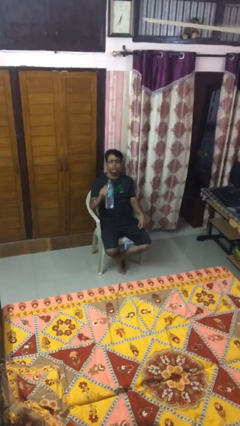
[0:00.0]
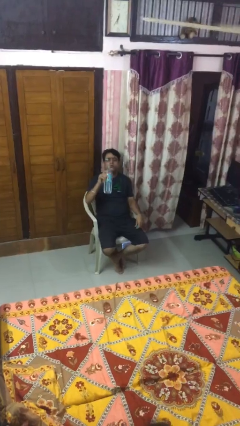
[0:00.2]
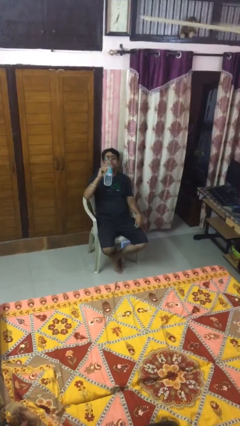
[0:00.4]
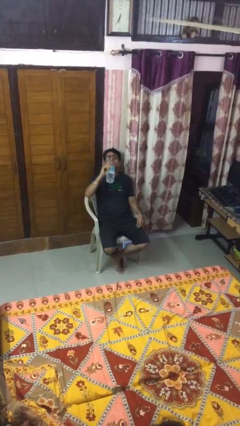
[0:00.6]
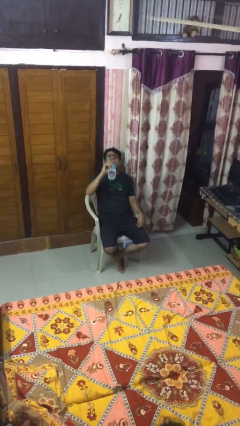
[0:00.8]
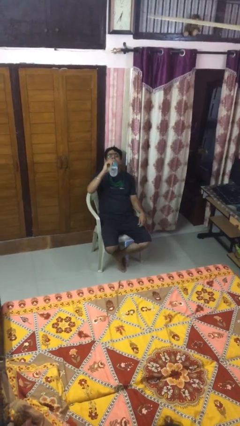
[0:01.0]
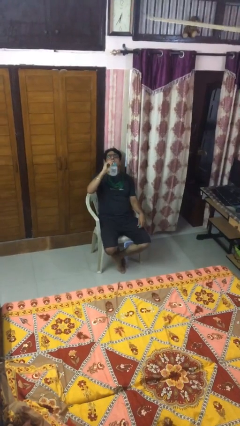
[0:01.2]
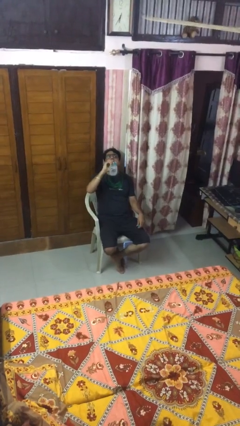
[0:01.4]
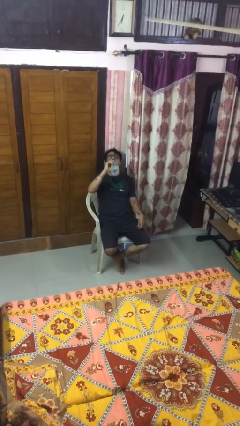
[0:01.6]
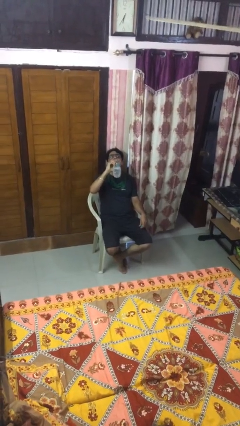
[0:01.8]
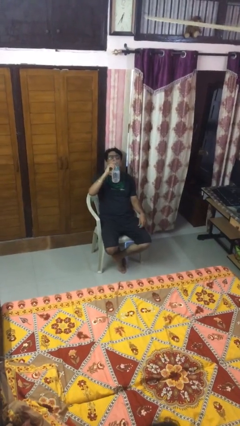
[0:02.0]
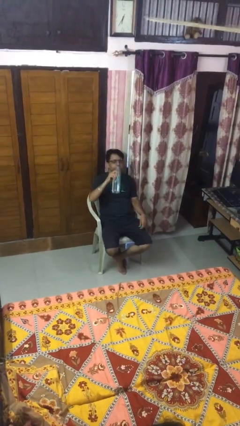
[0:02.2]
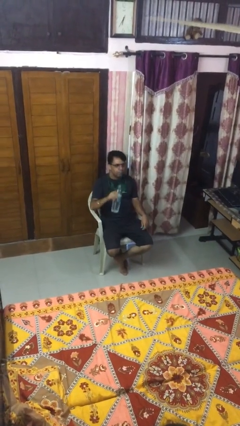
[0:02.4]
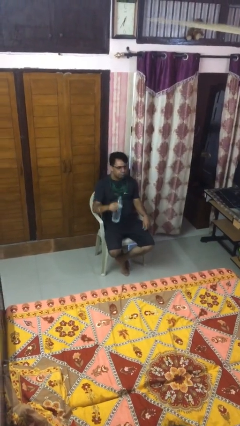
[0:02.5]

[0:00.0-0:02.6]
person drinks from bottle

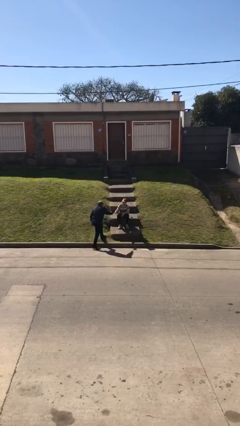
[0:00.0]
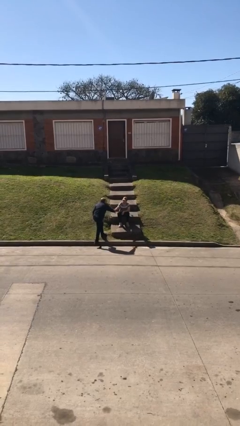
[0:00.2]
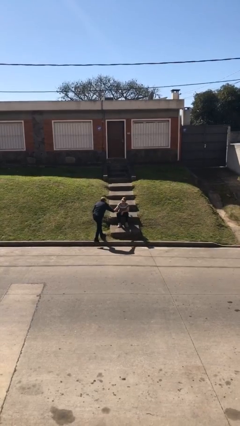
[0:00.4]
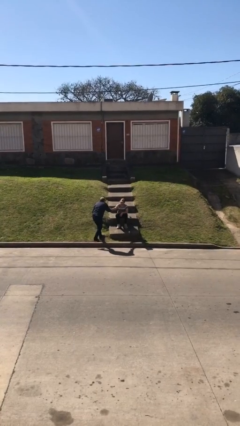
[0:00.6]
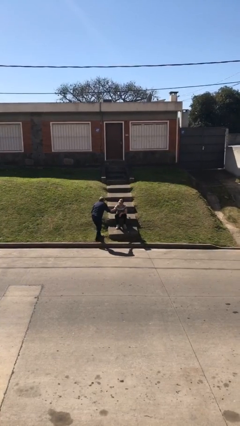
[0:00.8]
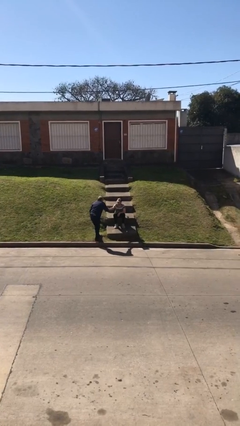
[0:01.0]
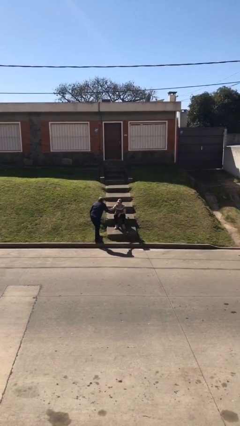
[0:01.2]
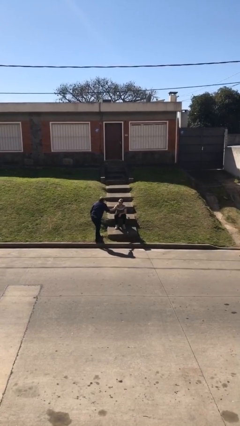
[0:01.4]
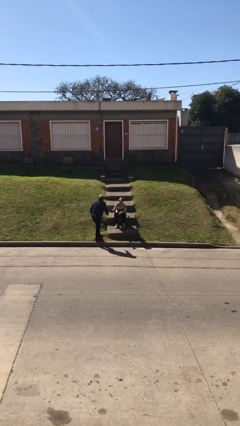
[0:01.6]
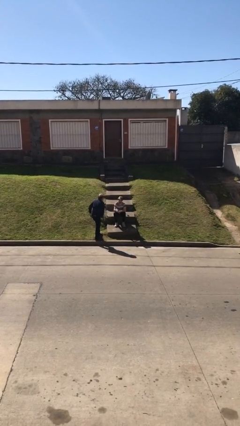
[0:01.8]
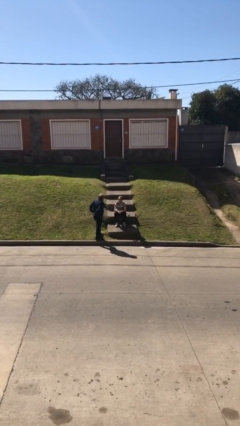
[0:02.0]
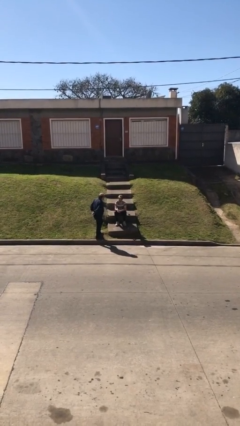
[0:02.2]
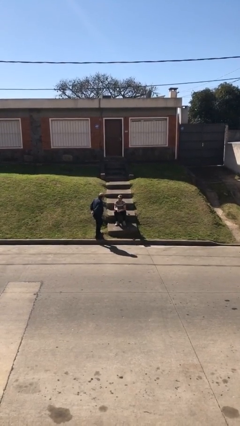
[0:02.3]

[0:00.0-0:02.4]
person shakes hand

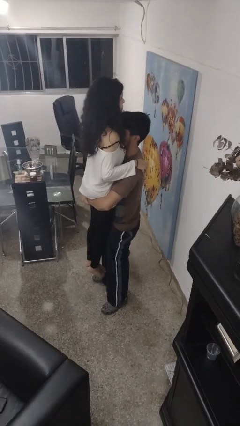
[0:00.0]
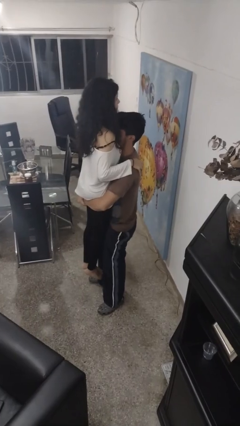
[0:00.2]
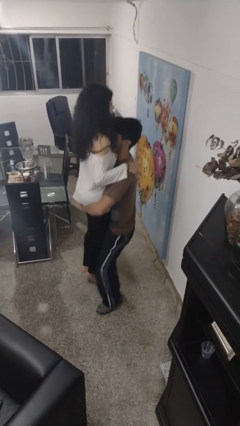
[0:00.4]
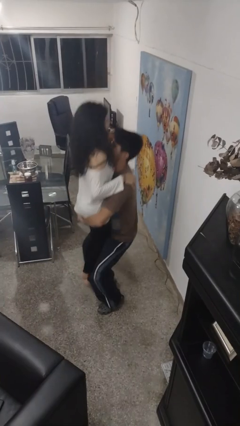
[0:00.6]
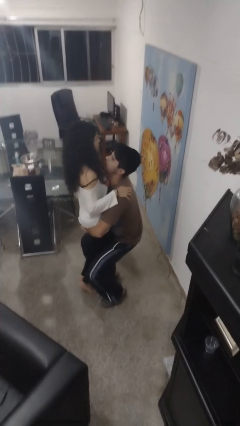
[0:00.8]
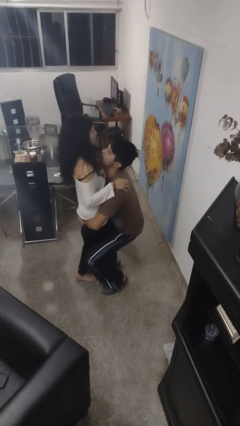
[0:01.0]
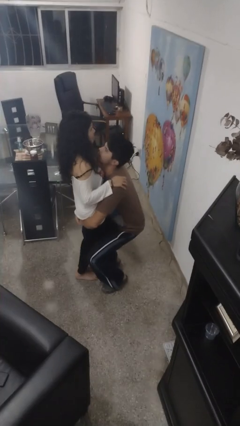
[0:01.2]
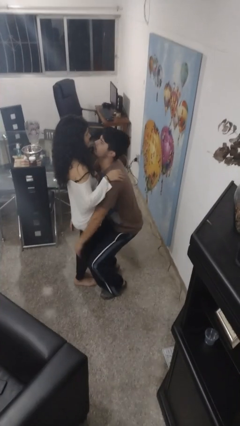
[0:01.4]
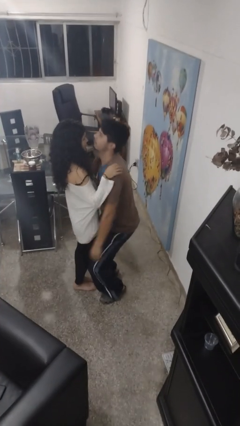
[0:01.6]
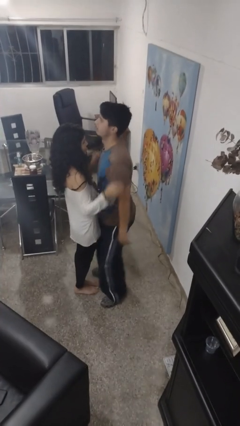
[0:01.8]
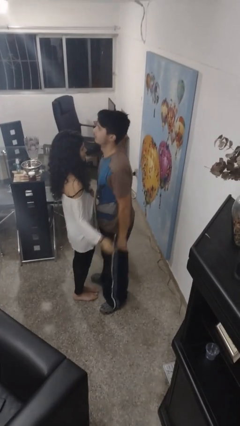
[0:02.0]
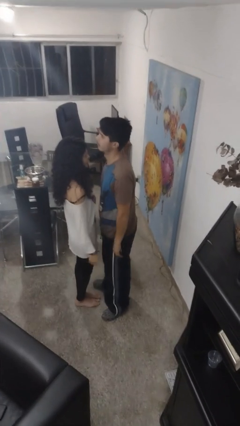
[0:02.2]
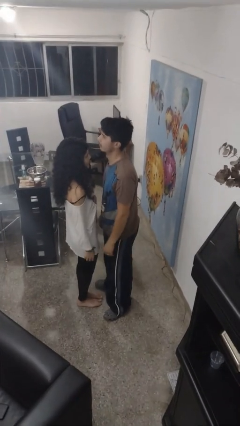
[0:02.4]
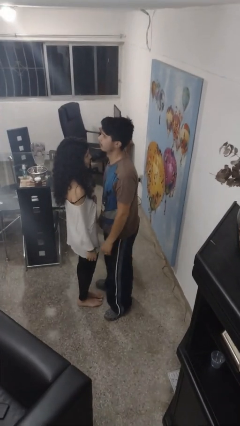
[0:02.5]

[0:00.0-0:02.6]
person puts down person

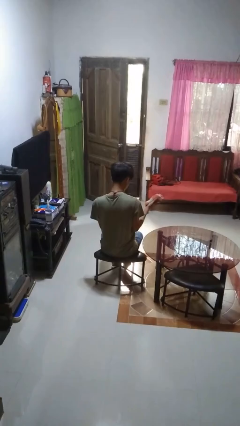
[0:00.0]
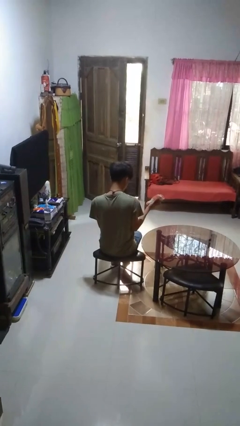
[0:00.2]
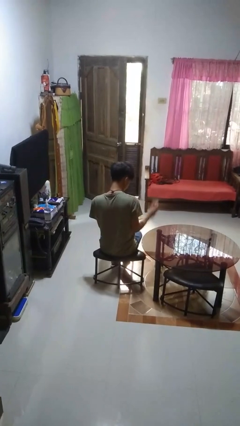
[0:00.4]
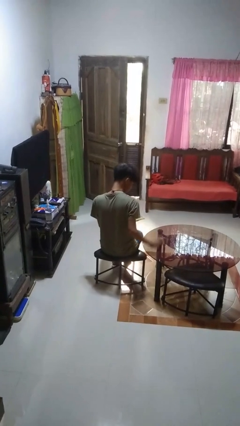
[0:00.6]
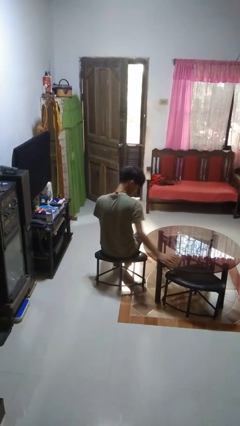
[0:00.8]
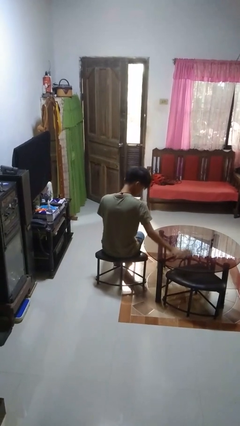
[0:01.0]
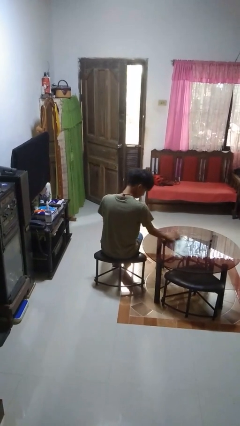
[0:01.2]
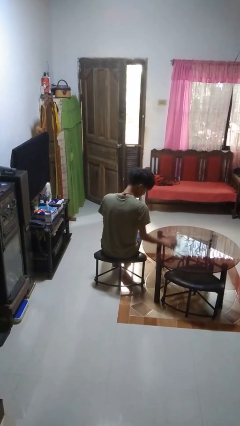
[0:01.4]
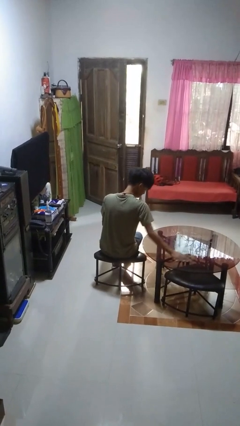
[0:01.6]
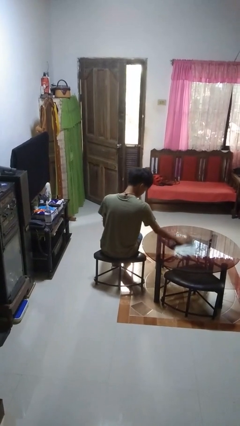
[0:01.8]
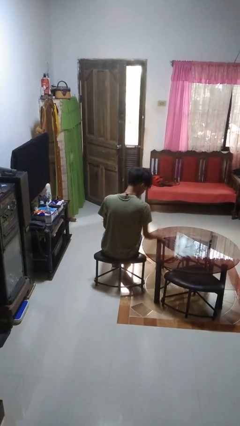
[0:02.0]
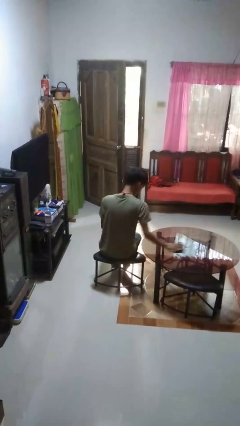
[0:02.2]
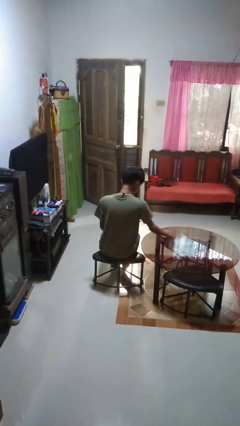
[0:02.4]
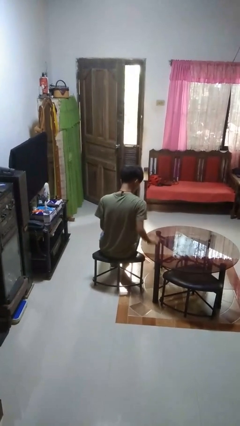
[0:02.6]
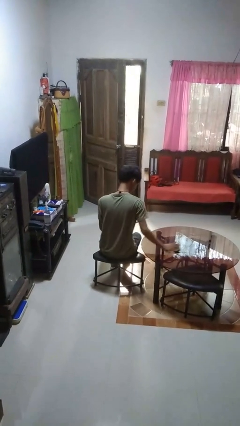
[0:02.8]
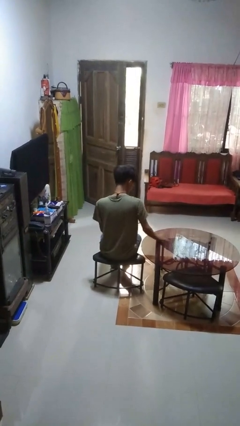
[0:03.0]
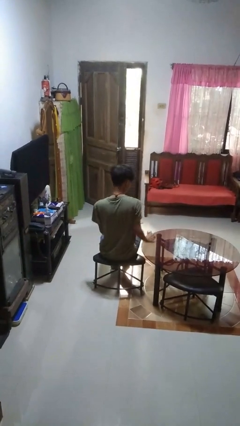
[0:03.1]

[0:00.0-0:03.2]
person cleans table with rag

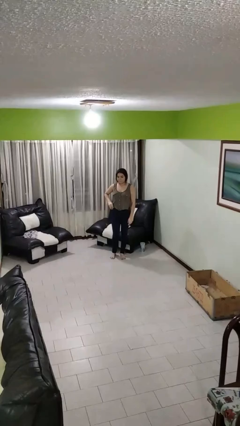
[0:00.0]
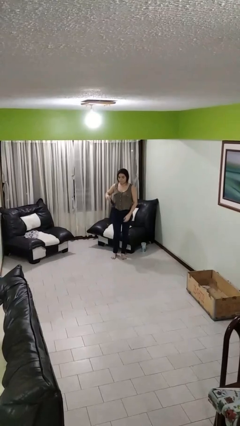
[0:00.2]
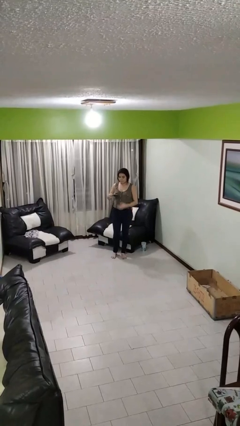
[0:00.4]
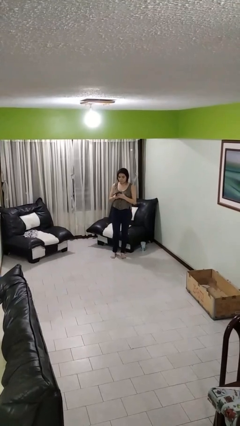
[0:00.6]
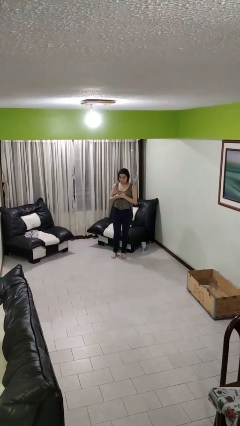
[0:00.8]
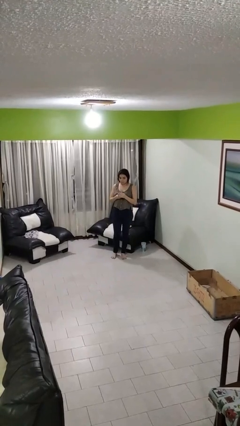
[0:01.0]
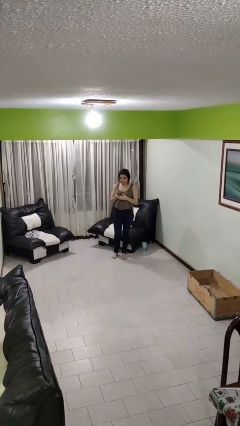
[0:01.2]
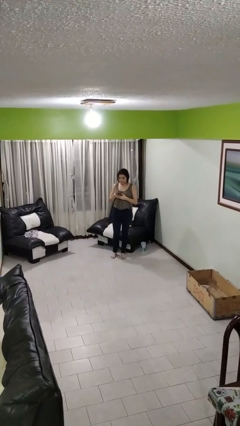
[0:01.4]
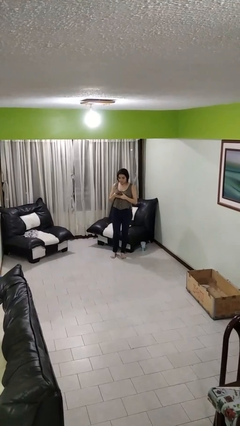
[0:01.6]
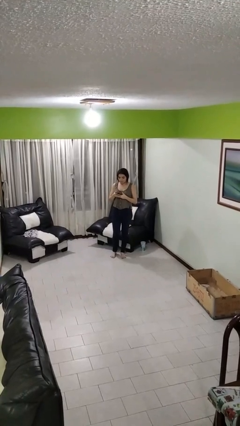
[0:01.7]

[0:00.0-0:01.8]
person takes phone from pocket

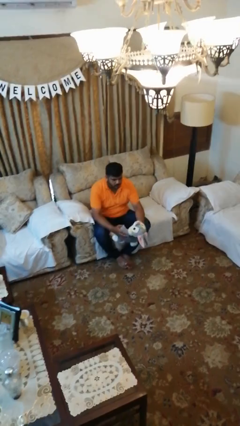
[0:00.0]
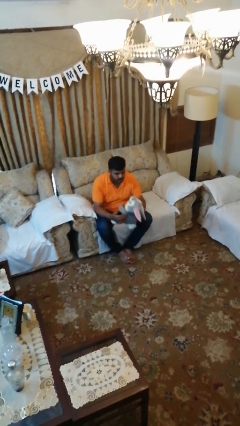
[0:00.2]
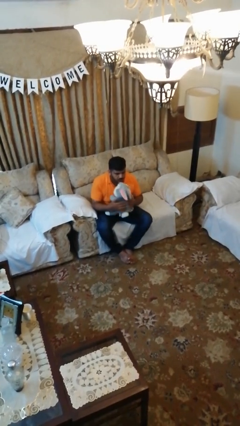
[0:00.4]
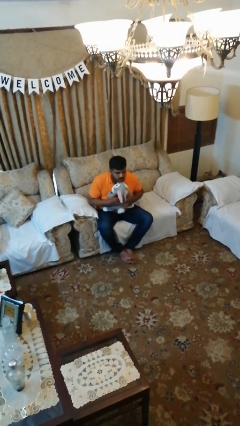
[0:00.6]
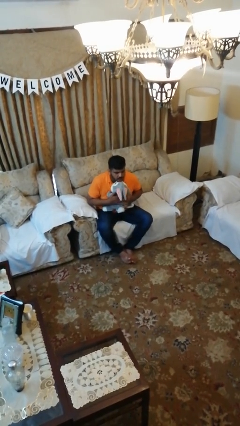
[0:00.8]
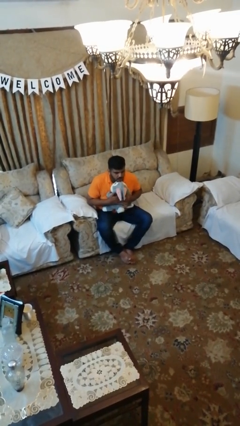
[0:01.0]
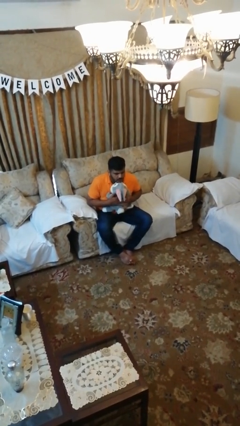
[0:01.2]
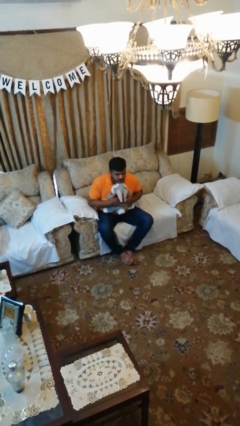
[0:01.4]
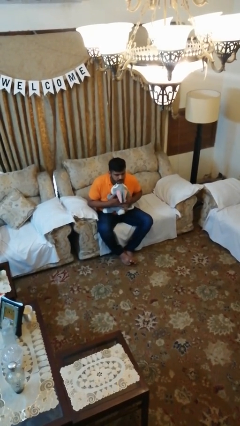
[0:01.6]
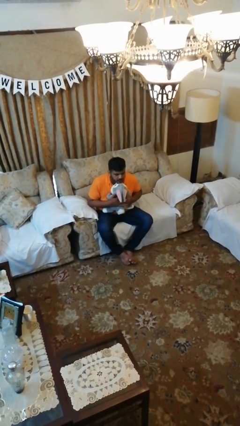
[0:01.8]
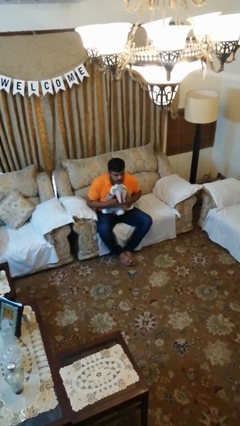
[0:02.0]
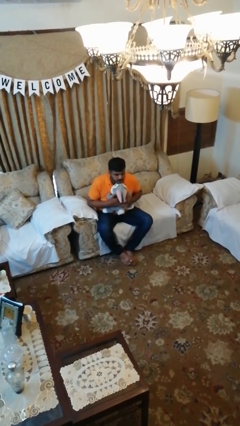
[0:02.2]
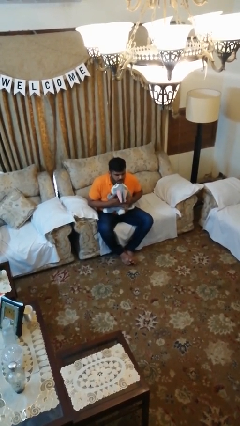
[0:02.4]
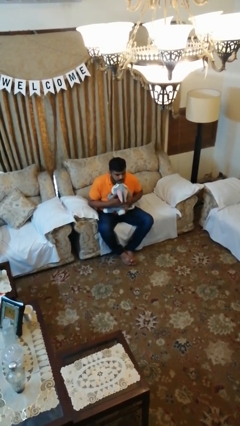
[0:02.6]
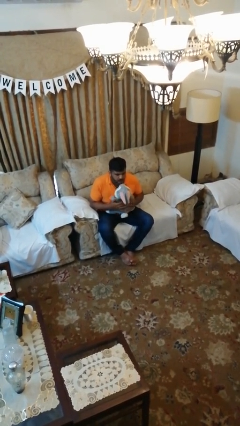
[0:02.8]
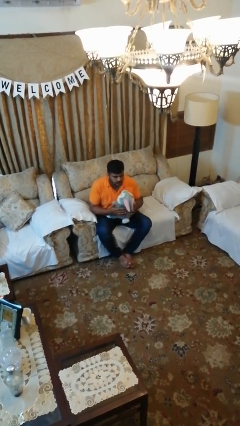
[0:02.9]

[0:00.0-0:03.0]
person hugs stuffed animal

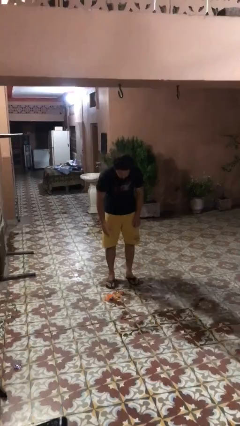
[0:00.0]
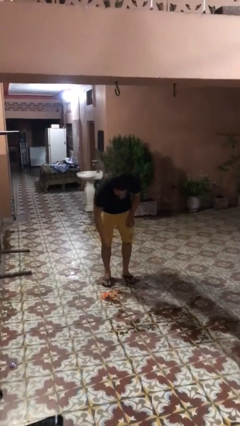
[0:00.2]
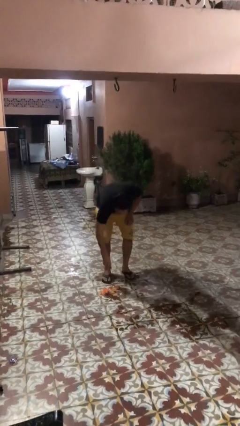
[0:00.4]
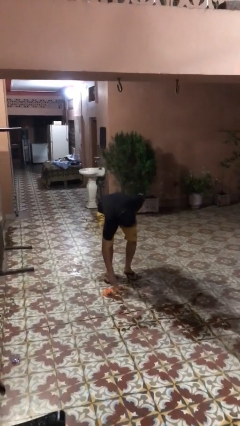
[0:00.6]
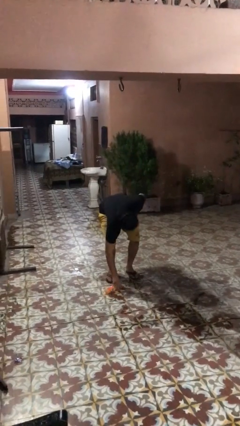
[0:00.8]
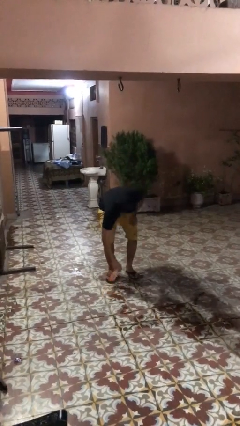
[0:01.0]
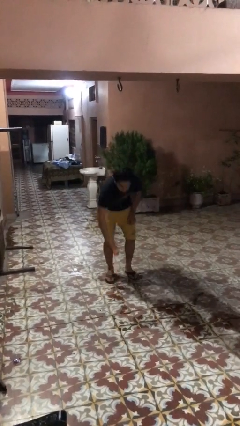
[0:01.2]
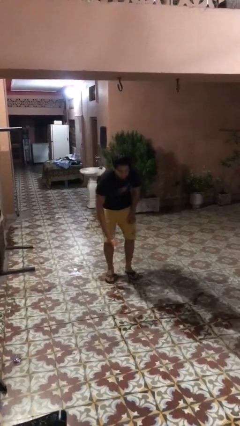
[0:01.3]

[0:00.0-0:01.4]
person picks up object from floor
